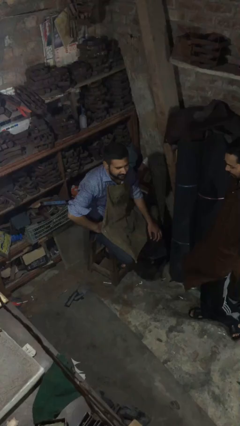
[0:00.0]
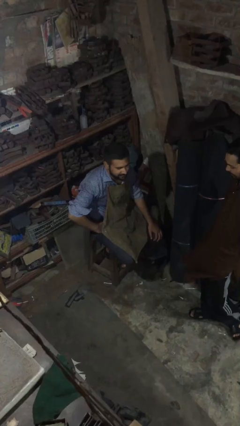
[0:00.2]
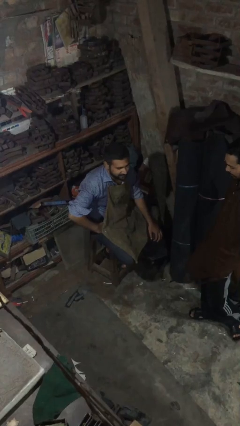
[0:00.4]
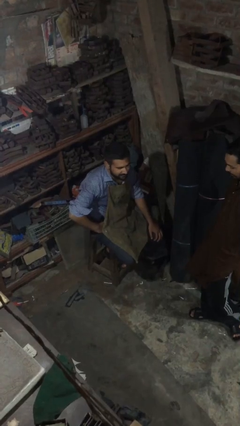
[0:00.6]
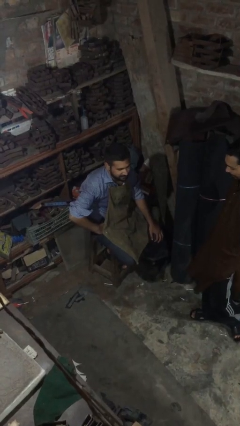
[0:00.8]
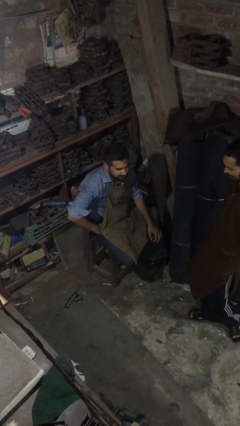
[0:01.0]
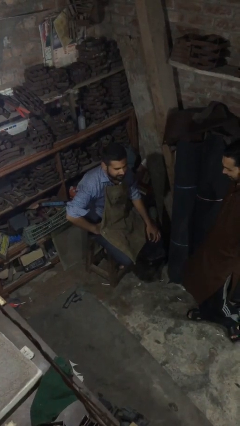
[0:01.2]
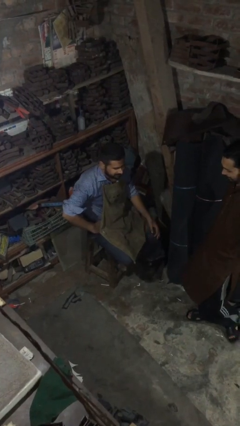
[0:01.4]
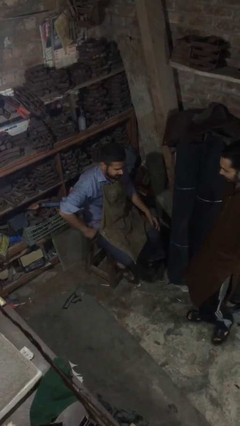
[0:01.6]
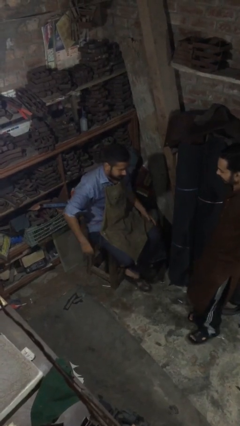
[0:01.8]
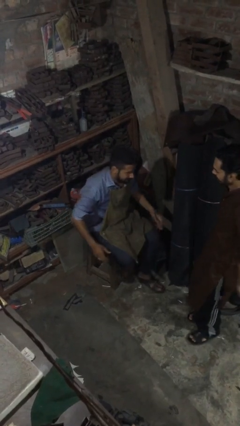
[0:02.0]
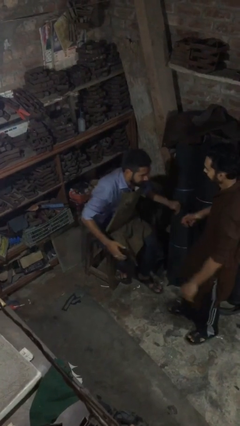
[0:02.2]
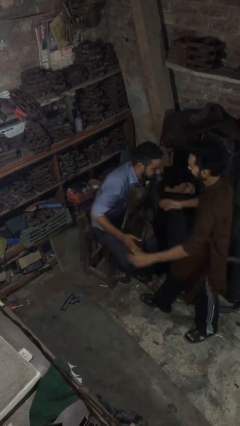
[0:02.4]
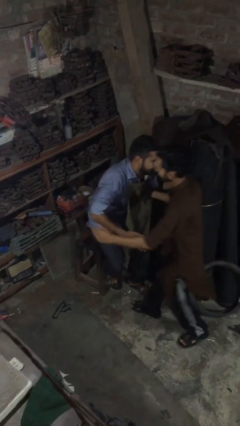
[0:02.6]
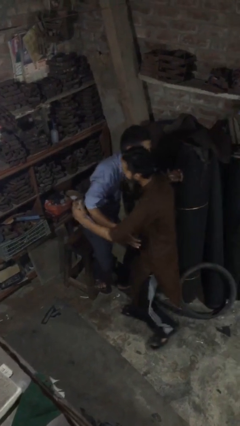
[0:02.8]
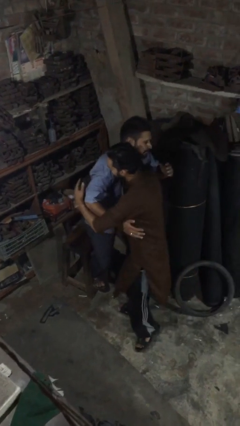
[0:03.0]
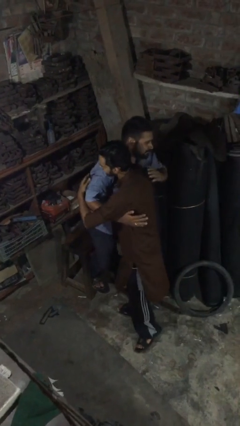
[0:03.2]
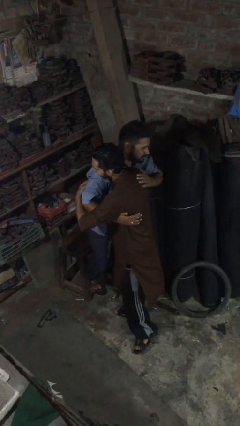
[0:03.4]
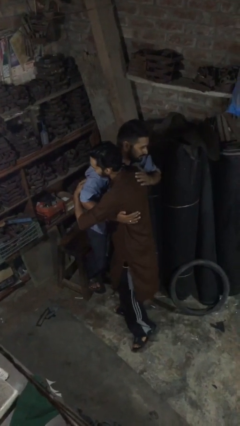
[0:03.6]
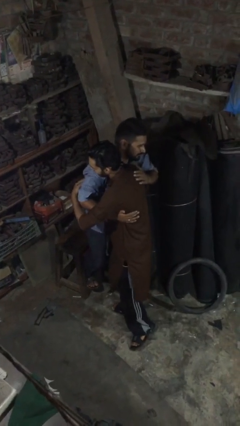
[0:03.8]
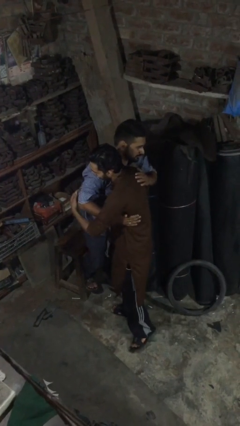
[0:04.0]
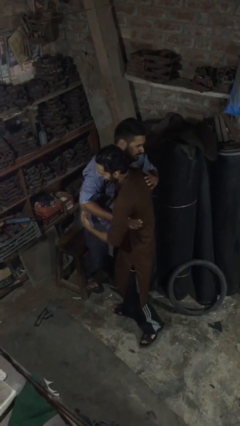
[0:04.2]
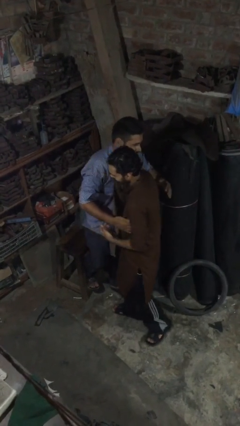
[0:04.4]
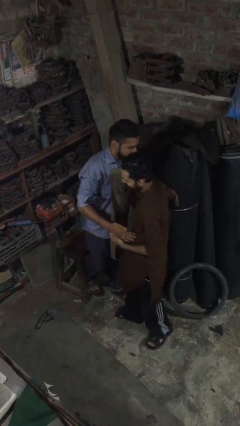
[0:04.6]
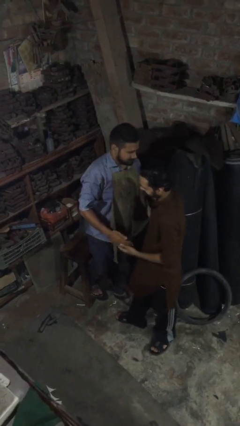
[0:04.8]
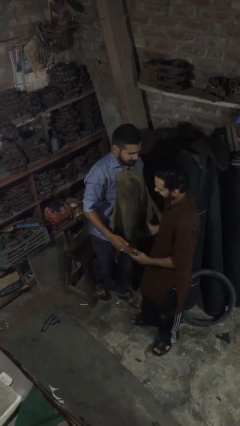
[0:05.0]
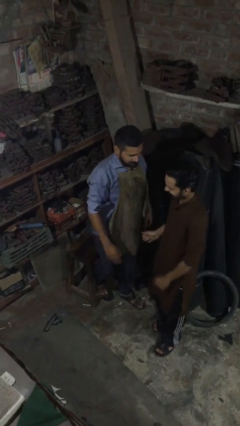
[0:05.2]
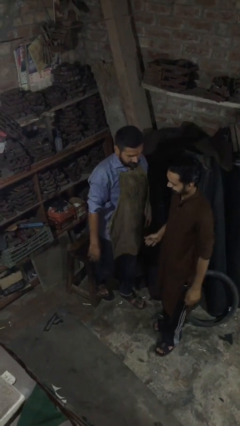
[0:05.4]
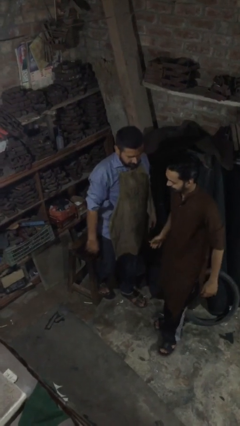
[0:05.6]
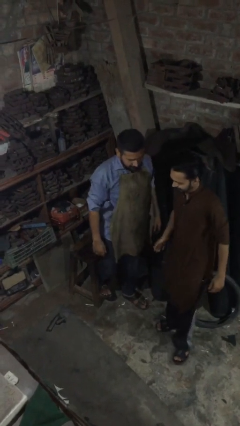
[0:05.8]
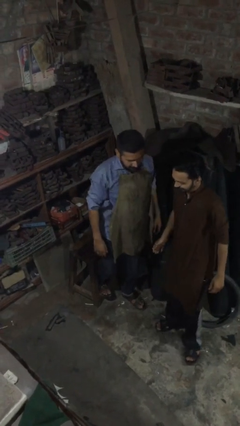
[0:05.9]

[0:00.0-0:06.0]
person embraces person

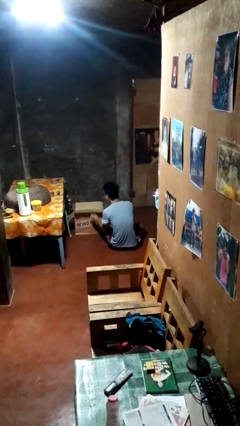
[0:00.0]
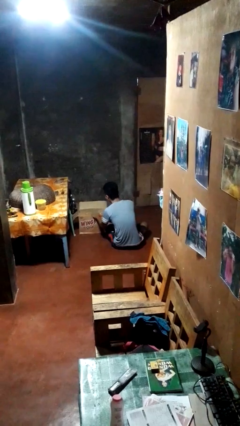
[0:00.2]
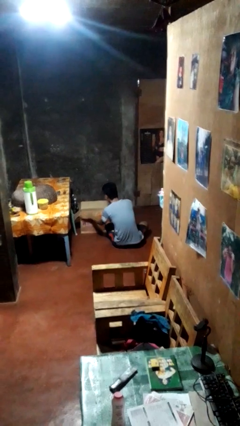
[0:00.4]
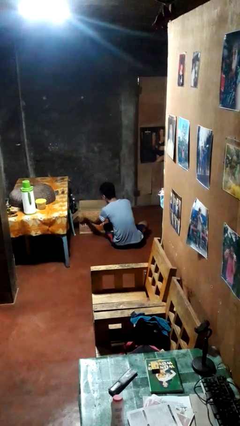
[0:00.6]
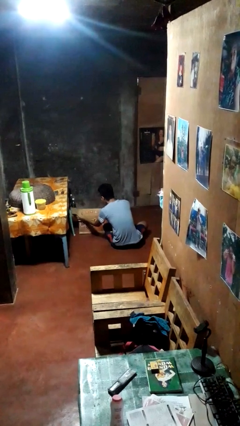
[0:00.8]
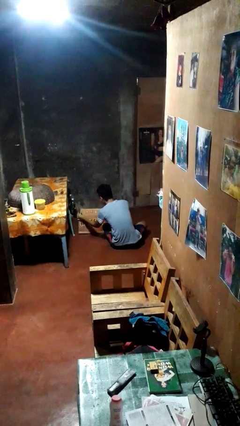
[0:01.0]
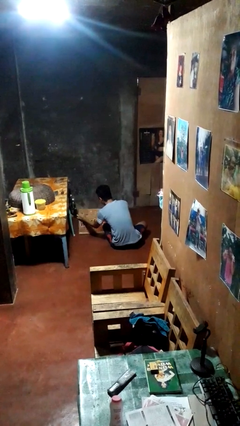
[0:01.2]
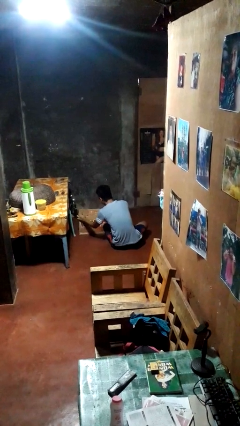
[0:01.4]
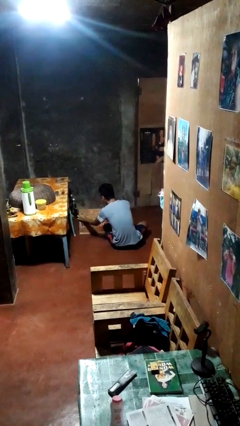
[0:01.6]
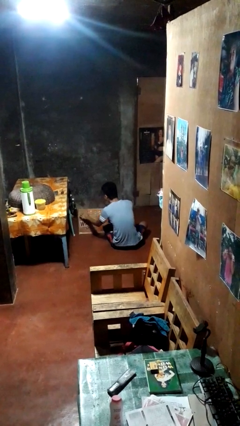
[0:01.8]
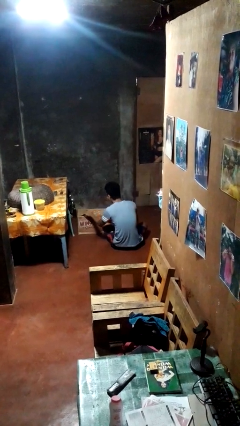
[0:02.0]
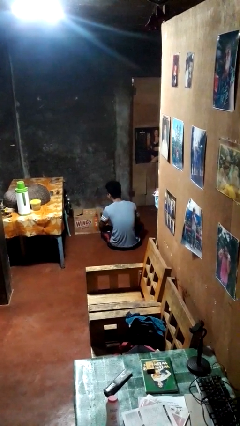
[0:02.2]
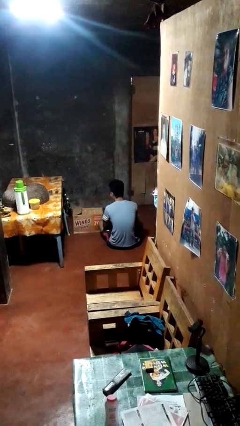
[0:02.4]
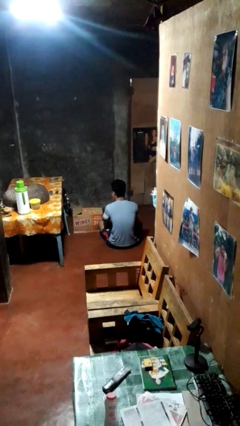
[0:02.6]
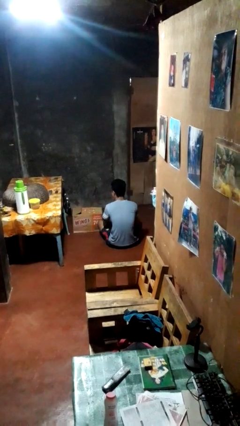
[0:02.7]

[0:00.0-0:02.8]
person closes box

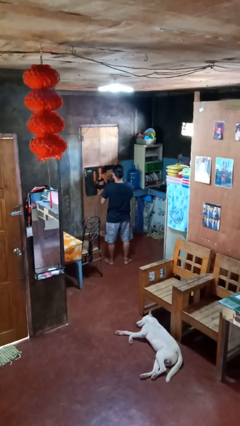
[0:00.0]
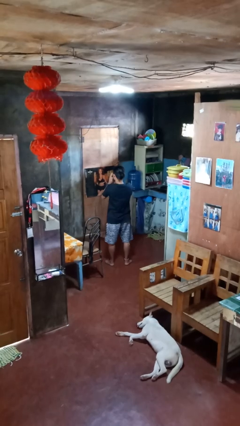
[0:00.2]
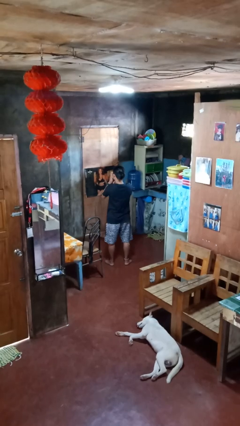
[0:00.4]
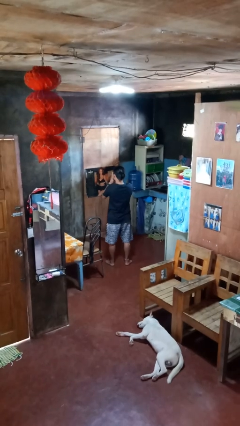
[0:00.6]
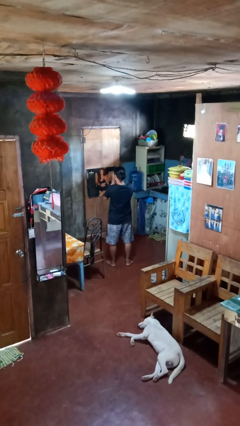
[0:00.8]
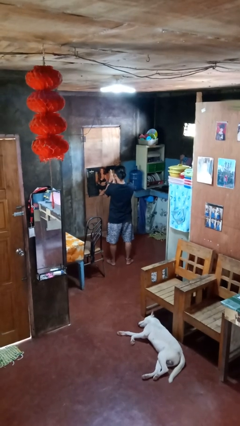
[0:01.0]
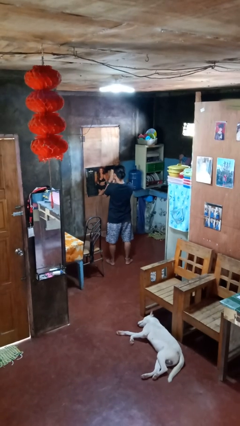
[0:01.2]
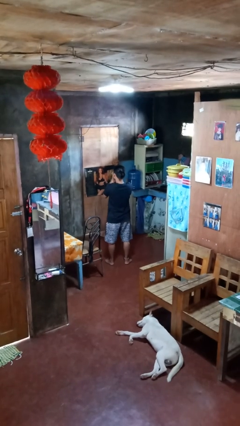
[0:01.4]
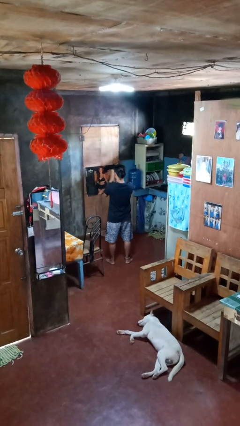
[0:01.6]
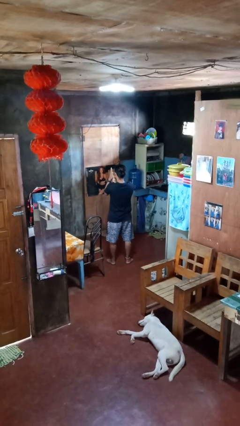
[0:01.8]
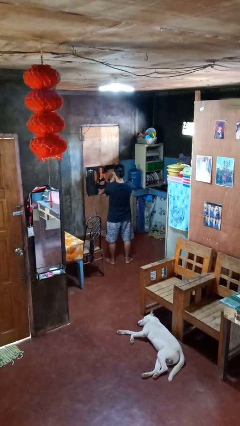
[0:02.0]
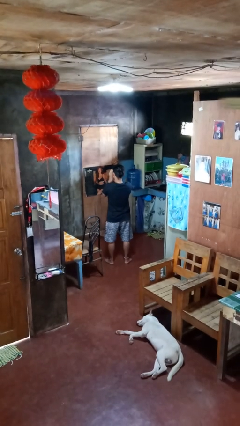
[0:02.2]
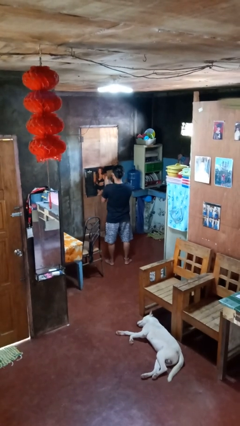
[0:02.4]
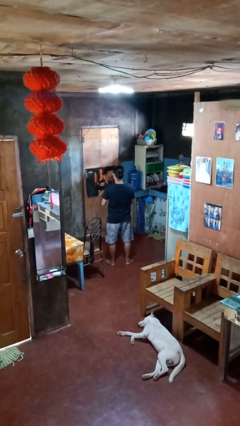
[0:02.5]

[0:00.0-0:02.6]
person blows into hands

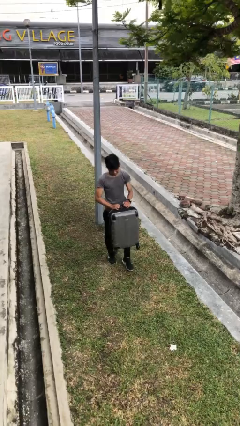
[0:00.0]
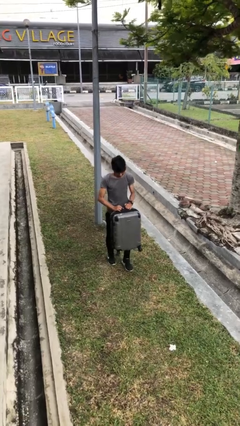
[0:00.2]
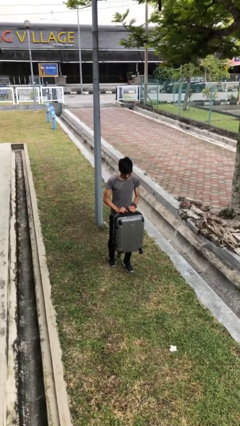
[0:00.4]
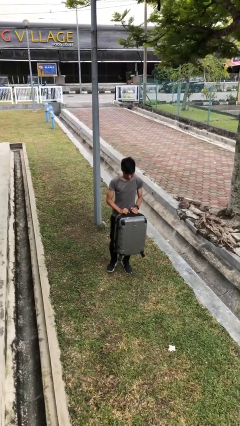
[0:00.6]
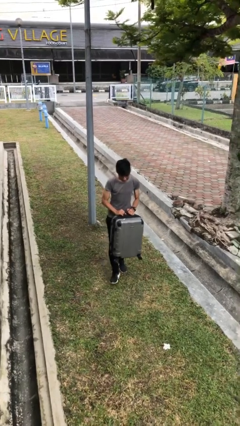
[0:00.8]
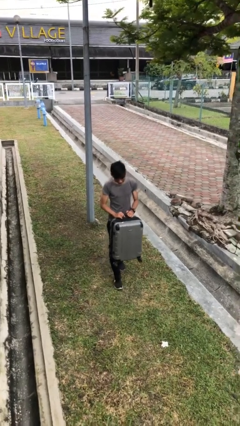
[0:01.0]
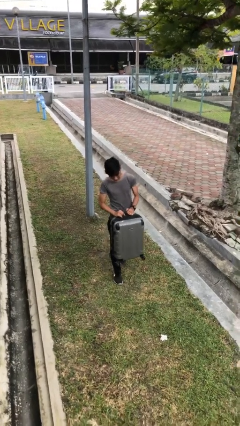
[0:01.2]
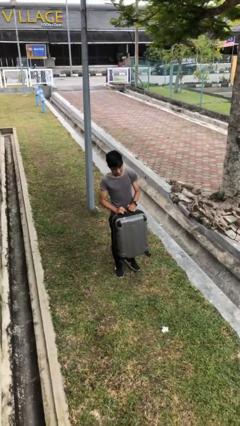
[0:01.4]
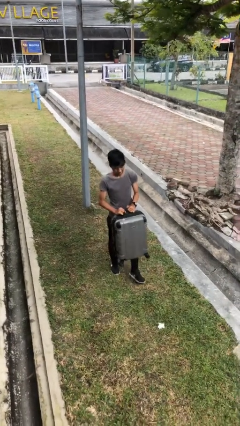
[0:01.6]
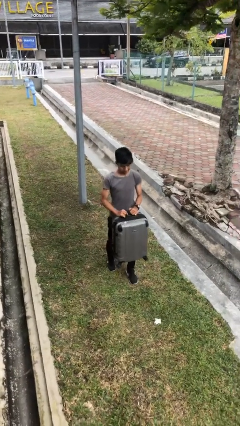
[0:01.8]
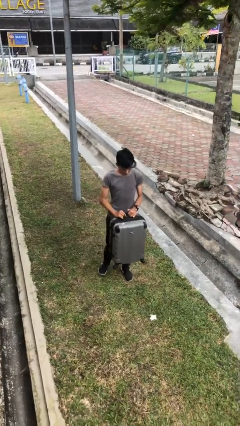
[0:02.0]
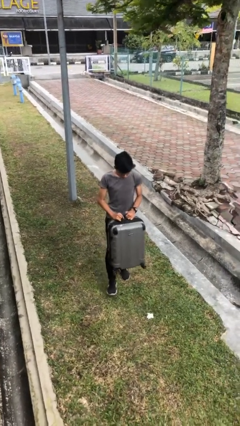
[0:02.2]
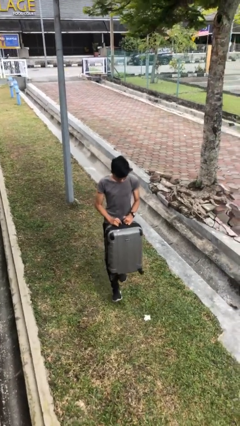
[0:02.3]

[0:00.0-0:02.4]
person carries heavy object

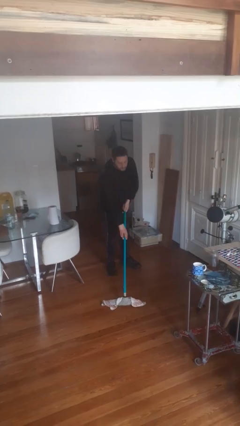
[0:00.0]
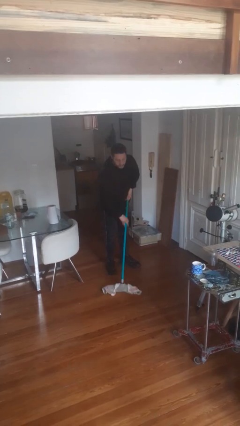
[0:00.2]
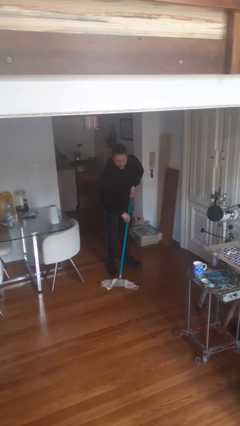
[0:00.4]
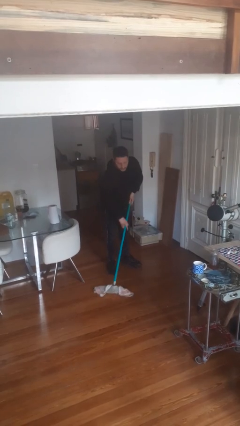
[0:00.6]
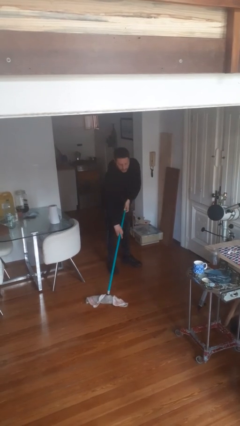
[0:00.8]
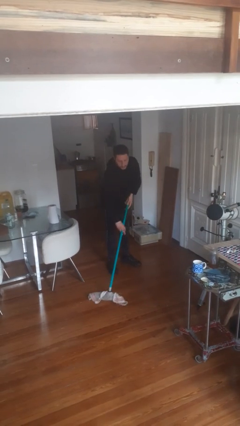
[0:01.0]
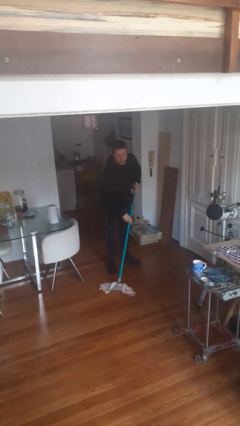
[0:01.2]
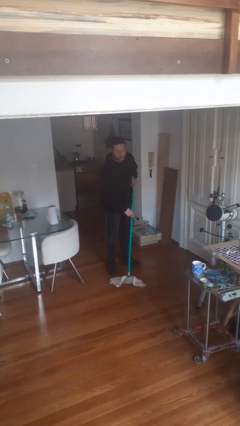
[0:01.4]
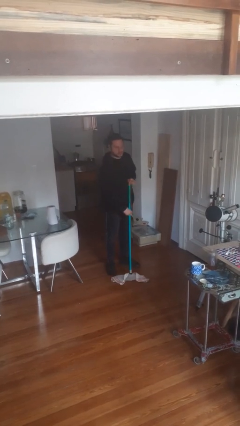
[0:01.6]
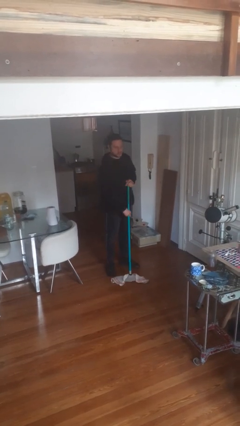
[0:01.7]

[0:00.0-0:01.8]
person mops

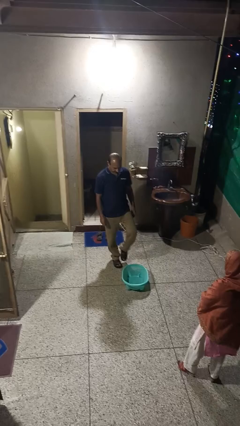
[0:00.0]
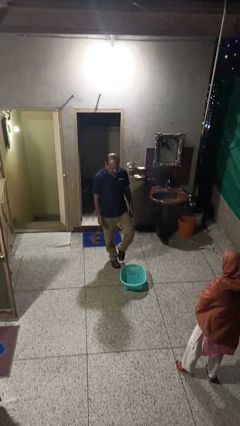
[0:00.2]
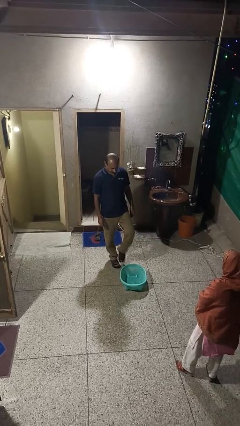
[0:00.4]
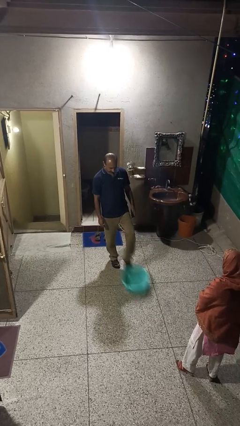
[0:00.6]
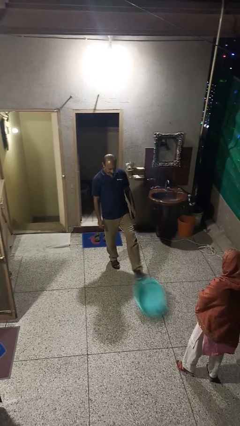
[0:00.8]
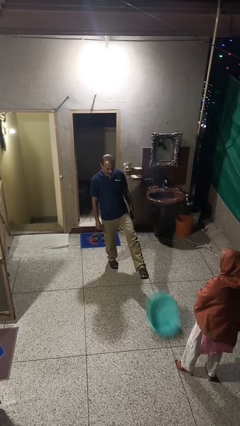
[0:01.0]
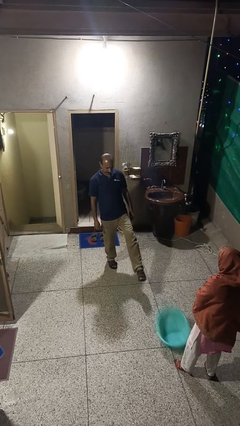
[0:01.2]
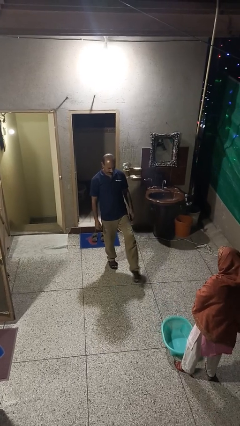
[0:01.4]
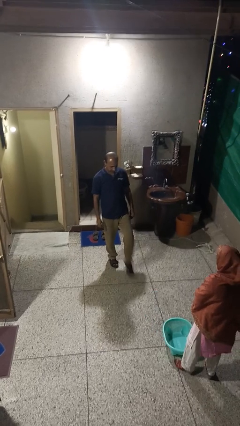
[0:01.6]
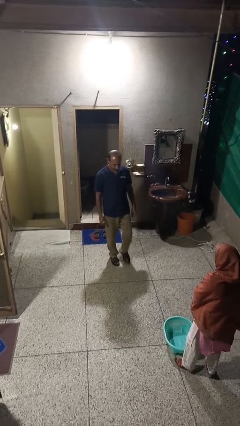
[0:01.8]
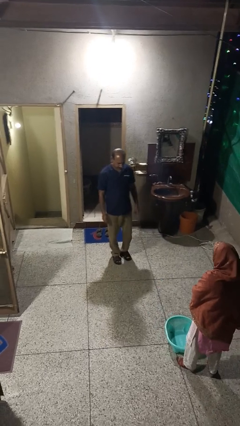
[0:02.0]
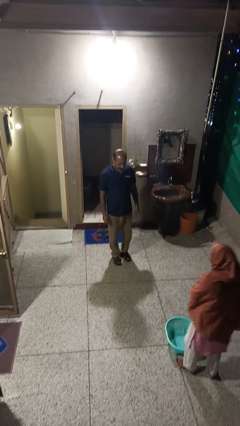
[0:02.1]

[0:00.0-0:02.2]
person kicks object to person
